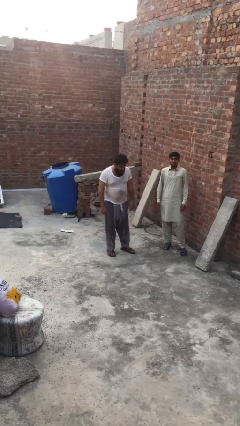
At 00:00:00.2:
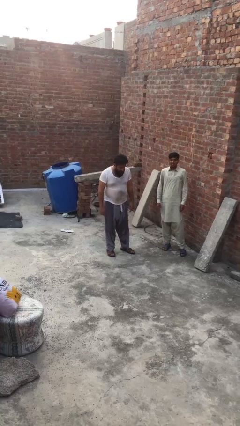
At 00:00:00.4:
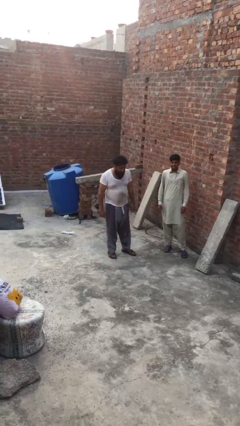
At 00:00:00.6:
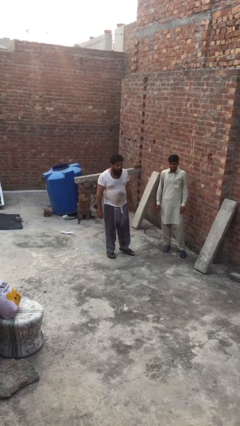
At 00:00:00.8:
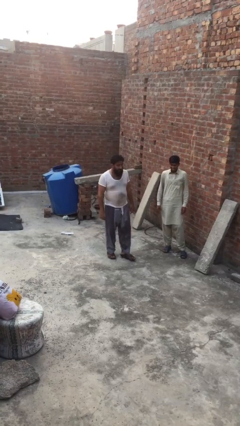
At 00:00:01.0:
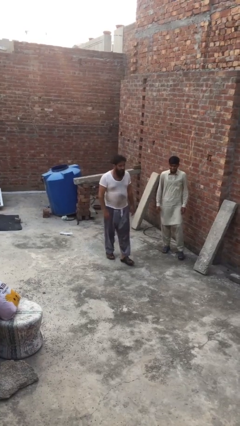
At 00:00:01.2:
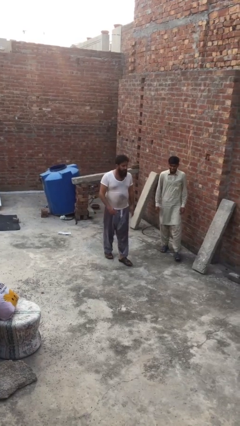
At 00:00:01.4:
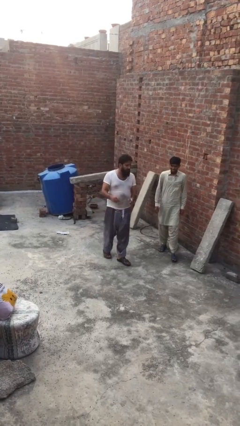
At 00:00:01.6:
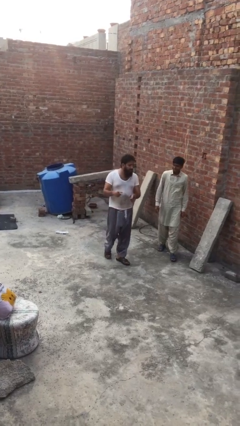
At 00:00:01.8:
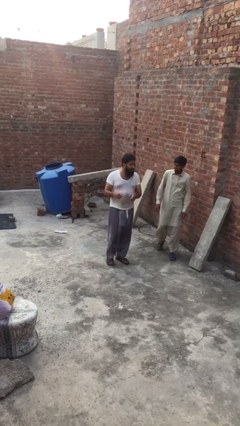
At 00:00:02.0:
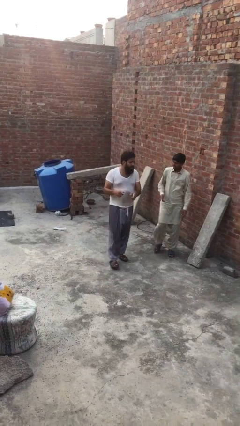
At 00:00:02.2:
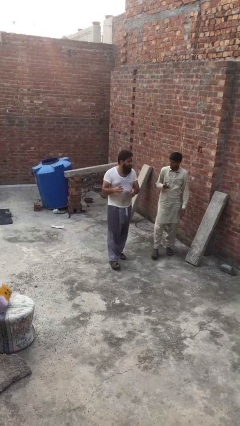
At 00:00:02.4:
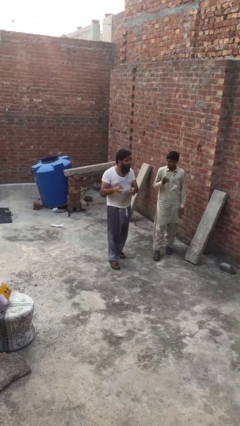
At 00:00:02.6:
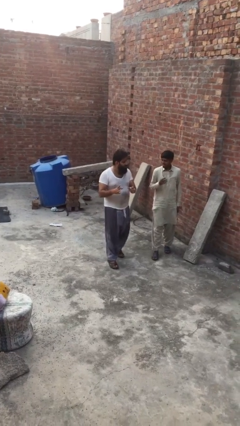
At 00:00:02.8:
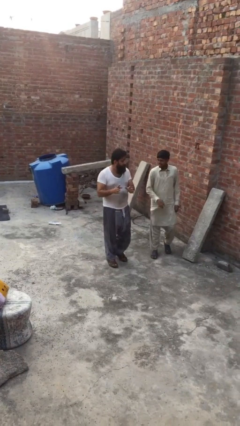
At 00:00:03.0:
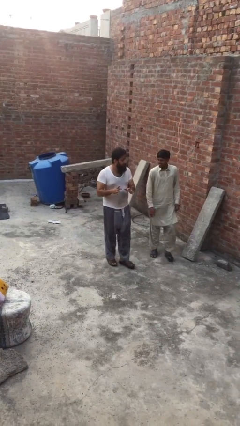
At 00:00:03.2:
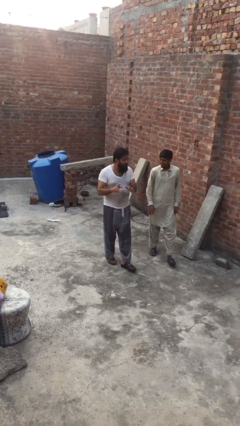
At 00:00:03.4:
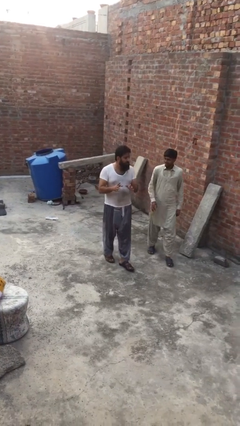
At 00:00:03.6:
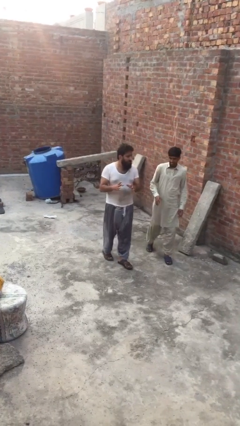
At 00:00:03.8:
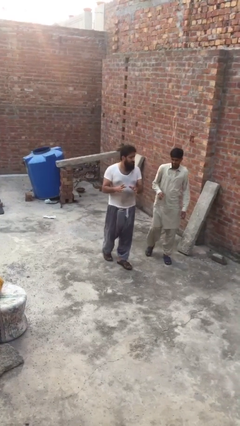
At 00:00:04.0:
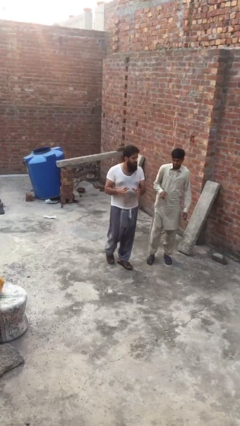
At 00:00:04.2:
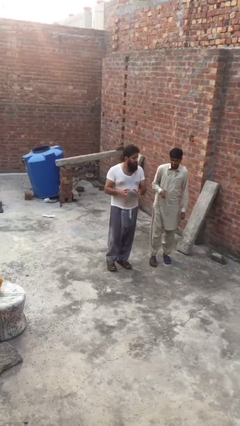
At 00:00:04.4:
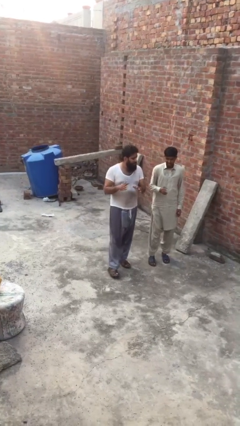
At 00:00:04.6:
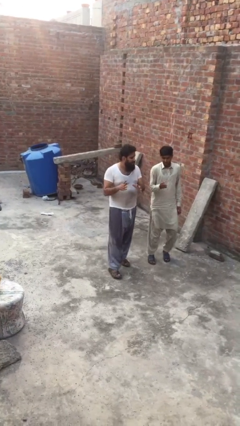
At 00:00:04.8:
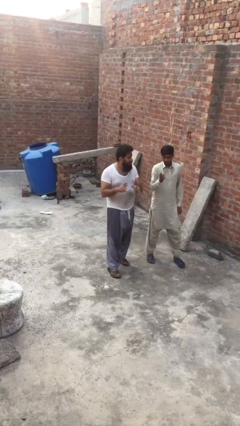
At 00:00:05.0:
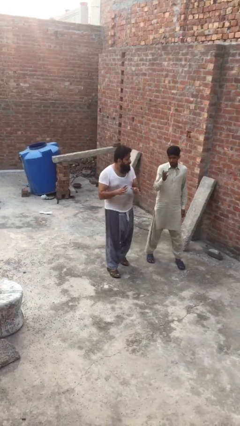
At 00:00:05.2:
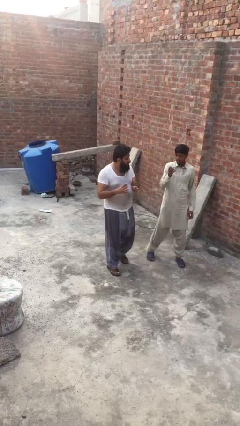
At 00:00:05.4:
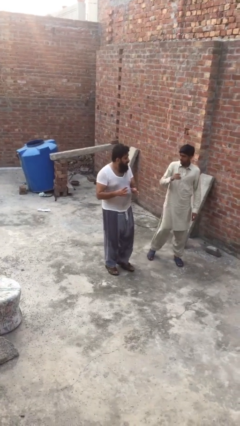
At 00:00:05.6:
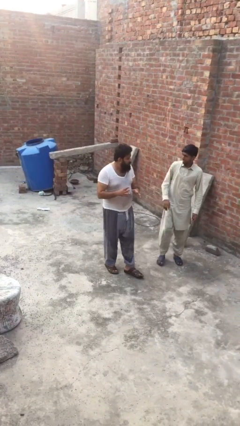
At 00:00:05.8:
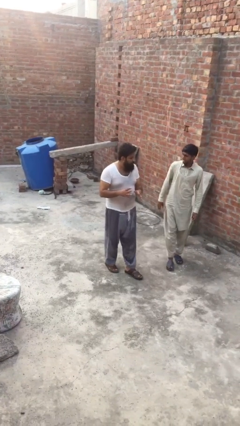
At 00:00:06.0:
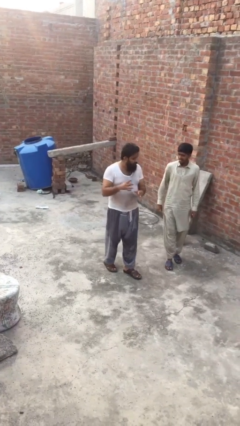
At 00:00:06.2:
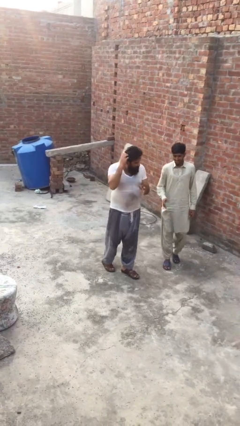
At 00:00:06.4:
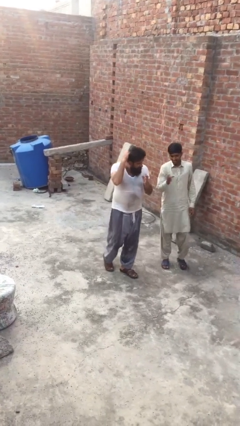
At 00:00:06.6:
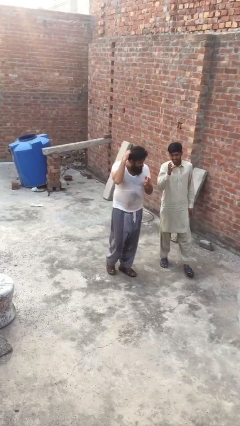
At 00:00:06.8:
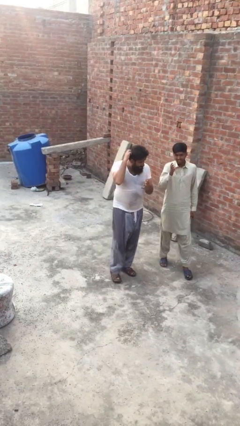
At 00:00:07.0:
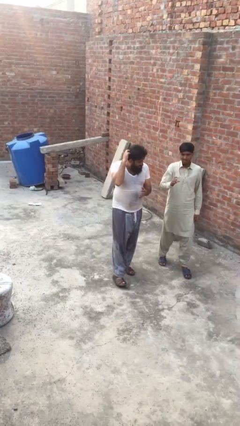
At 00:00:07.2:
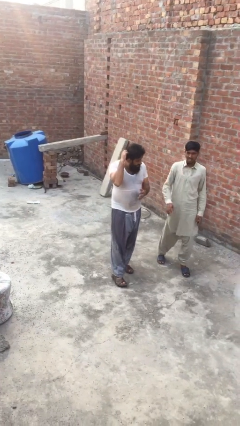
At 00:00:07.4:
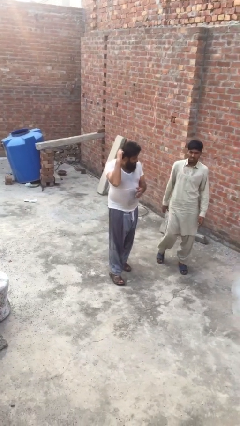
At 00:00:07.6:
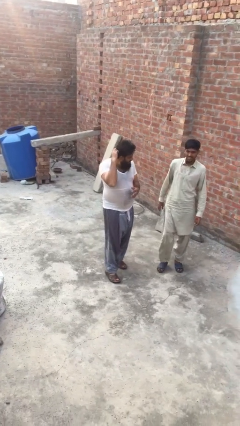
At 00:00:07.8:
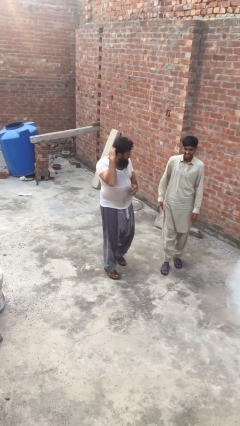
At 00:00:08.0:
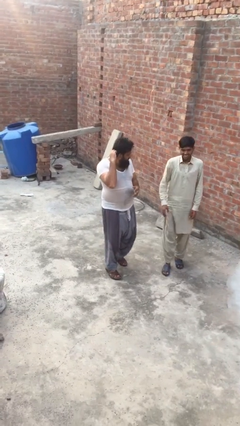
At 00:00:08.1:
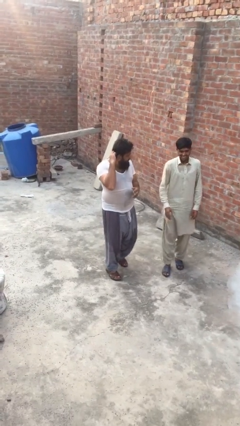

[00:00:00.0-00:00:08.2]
person talks to person

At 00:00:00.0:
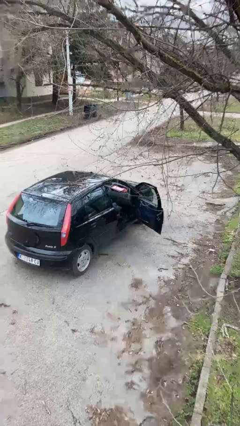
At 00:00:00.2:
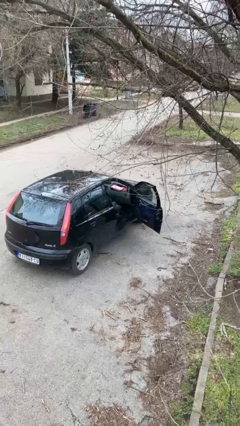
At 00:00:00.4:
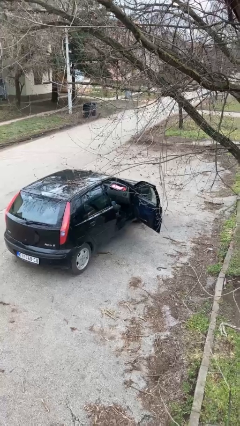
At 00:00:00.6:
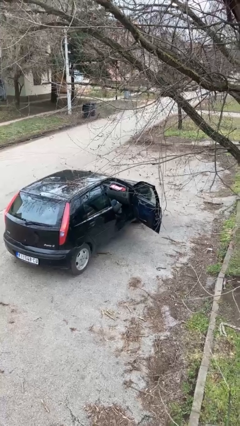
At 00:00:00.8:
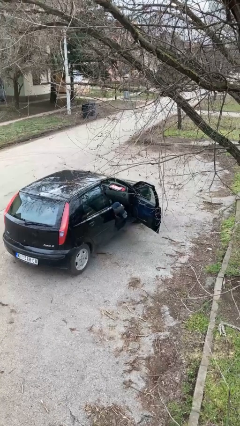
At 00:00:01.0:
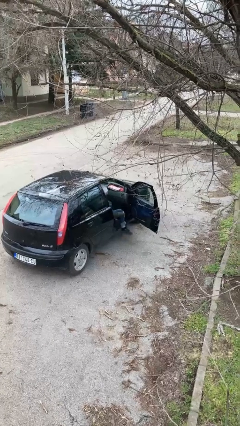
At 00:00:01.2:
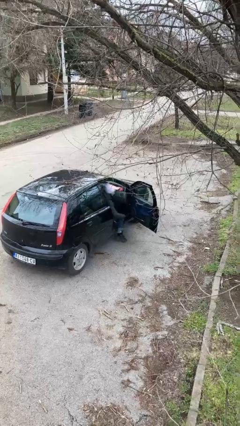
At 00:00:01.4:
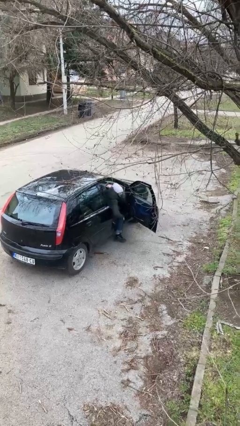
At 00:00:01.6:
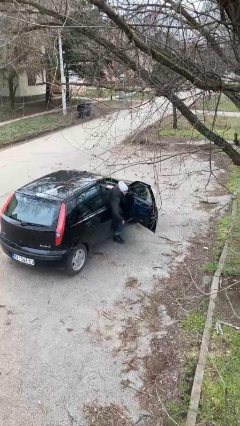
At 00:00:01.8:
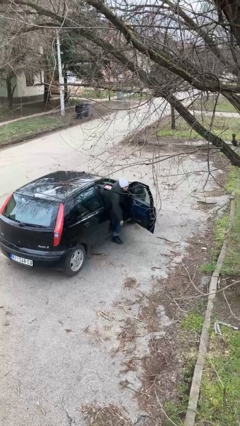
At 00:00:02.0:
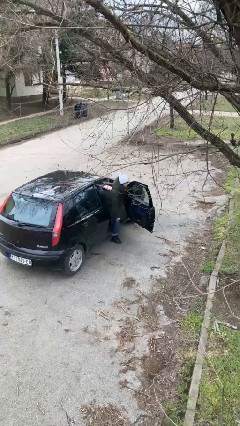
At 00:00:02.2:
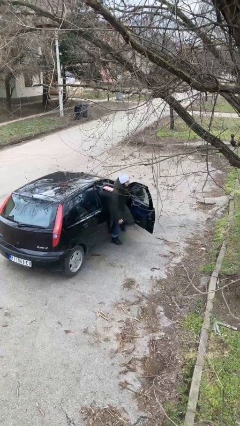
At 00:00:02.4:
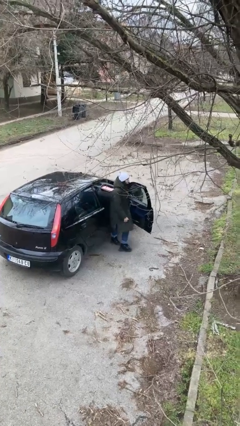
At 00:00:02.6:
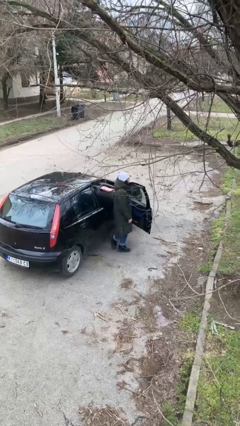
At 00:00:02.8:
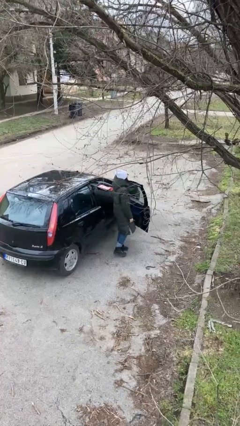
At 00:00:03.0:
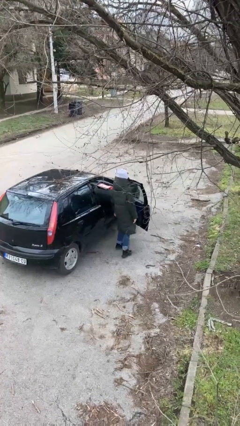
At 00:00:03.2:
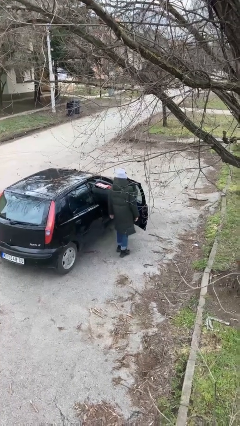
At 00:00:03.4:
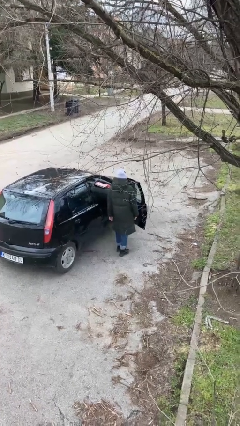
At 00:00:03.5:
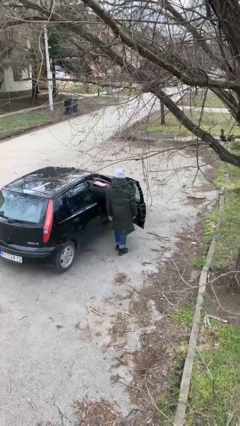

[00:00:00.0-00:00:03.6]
person exits car

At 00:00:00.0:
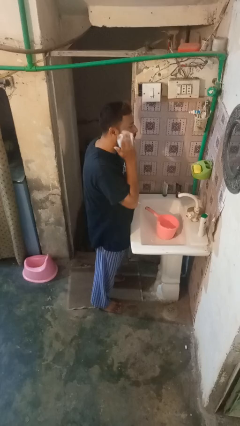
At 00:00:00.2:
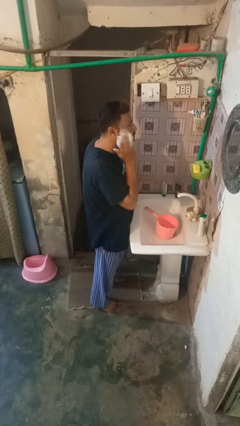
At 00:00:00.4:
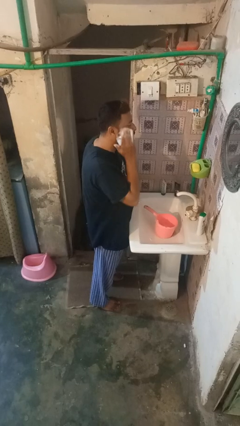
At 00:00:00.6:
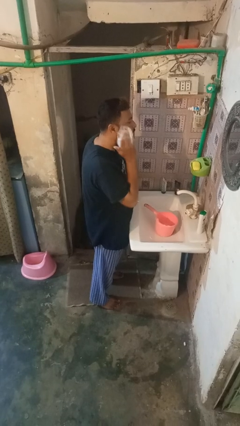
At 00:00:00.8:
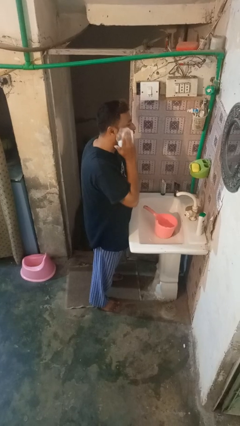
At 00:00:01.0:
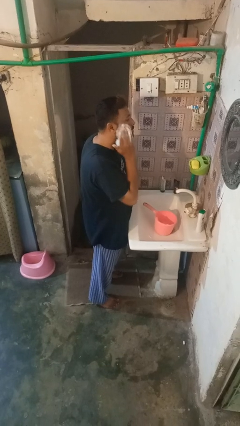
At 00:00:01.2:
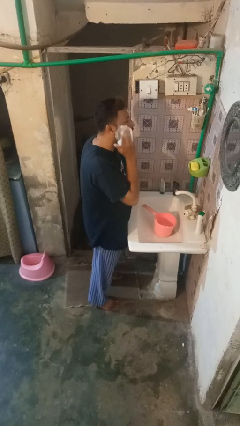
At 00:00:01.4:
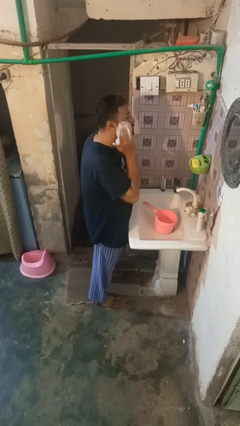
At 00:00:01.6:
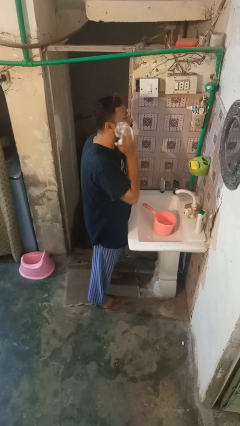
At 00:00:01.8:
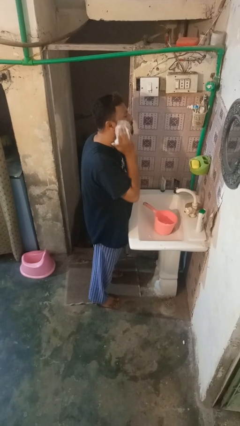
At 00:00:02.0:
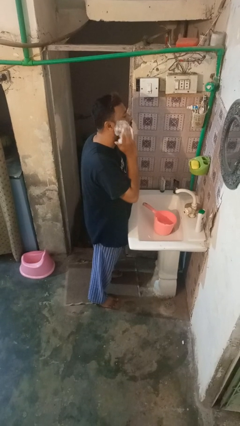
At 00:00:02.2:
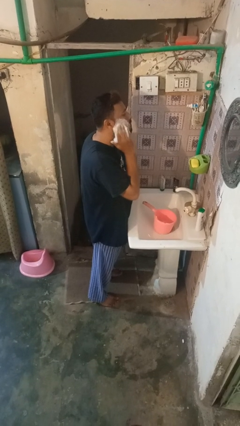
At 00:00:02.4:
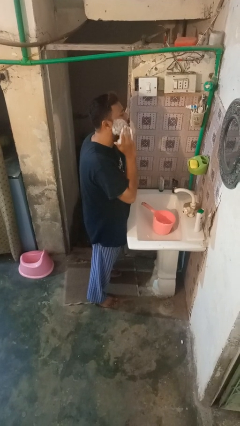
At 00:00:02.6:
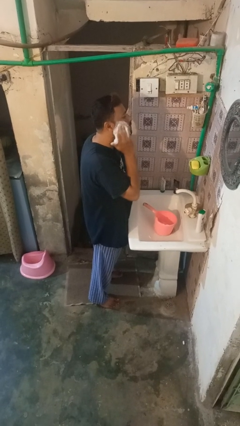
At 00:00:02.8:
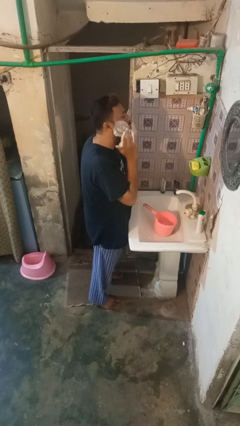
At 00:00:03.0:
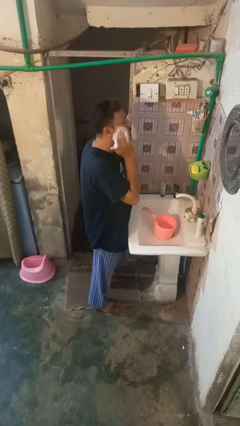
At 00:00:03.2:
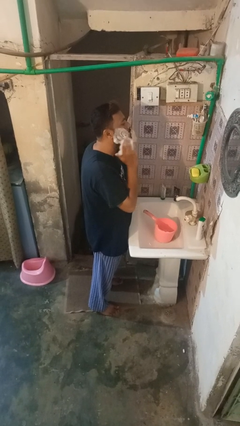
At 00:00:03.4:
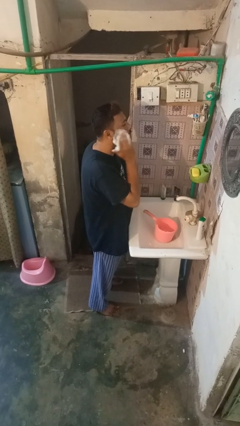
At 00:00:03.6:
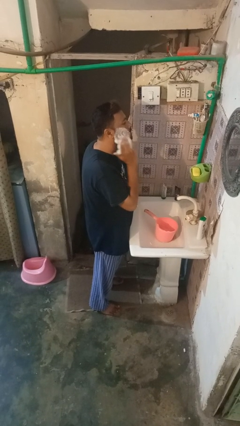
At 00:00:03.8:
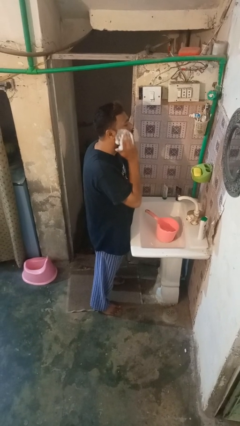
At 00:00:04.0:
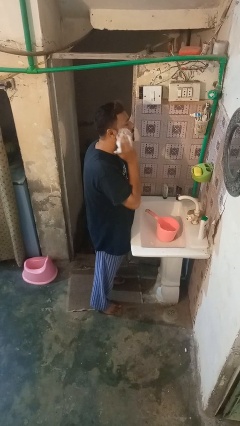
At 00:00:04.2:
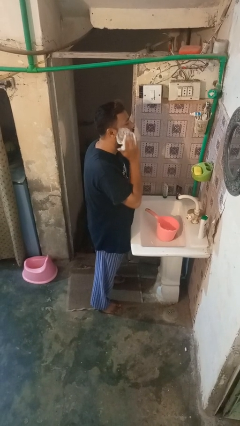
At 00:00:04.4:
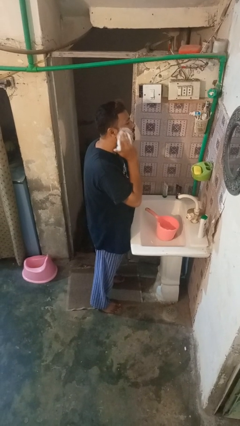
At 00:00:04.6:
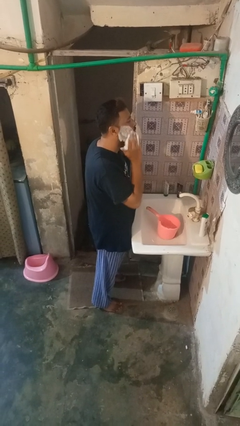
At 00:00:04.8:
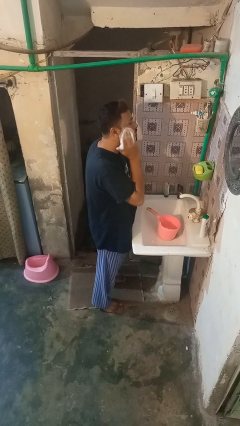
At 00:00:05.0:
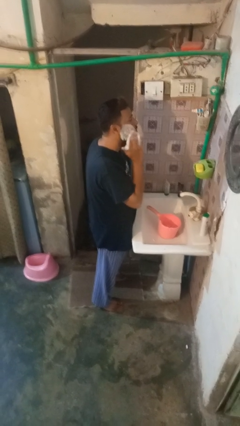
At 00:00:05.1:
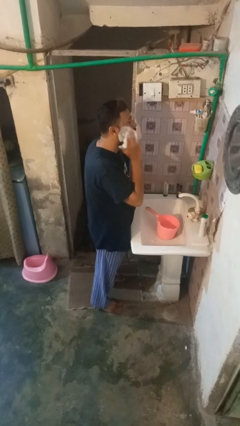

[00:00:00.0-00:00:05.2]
person shaves face

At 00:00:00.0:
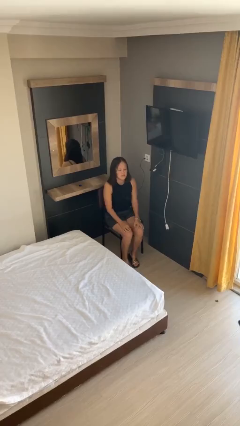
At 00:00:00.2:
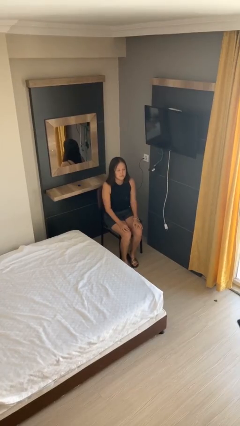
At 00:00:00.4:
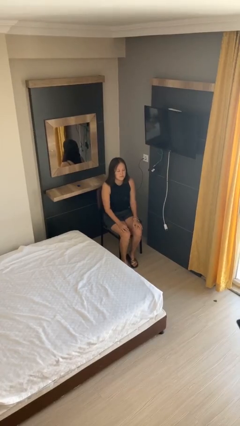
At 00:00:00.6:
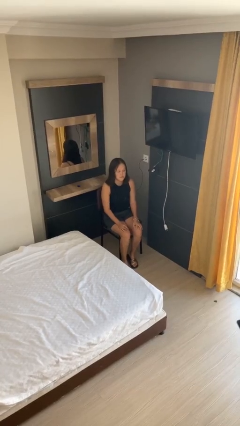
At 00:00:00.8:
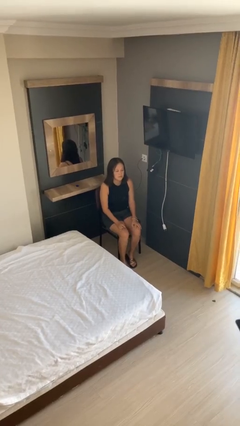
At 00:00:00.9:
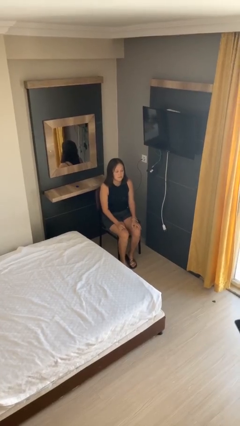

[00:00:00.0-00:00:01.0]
person falls from chair
